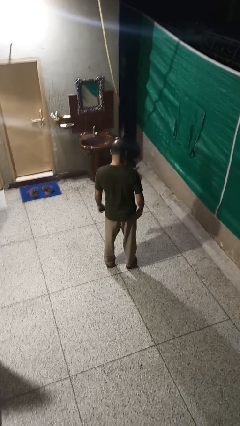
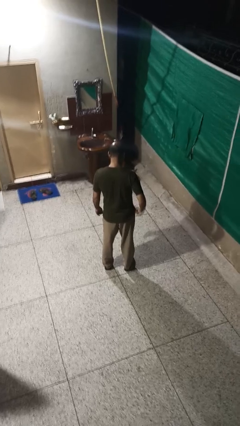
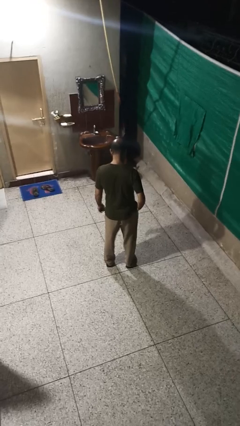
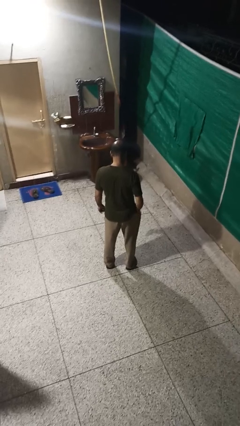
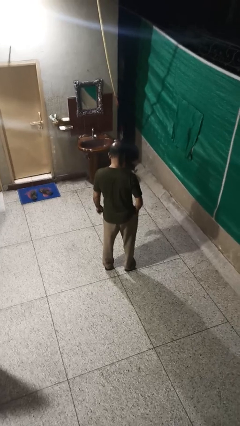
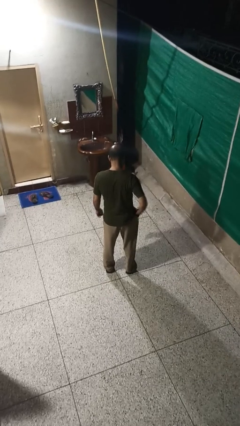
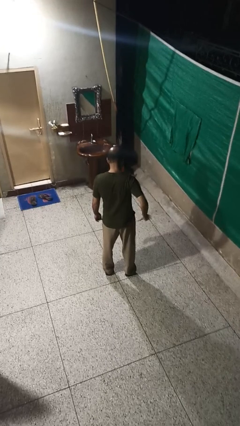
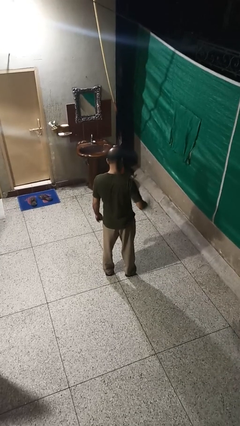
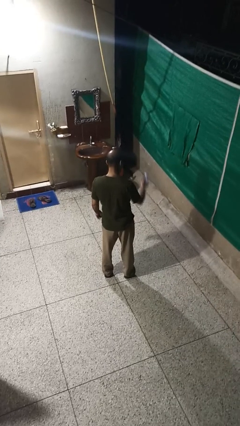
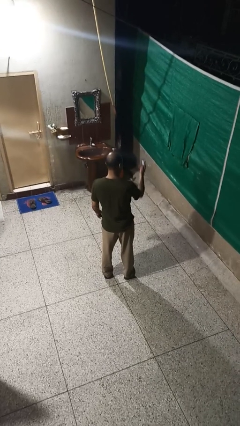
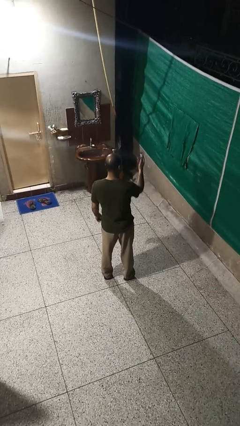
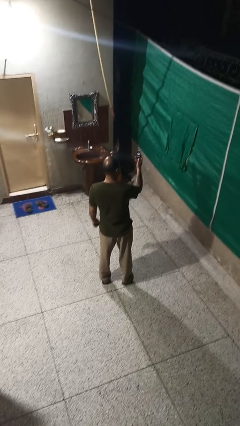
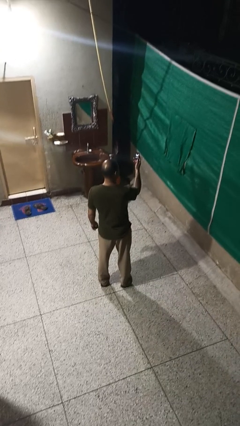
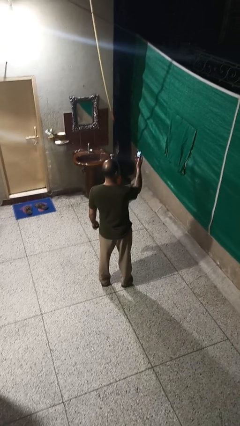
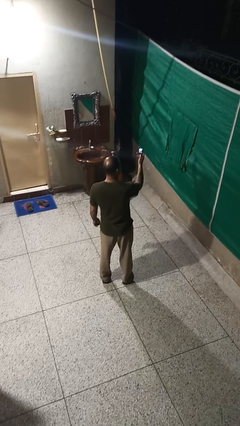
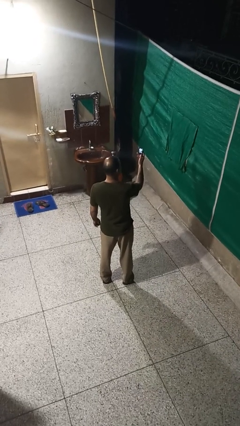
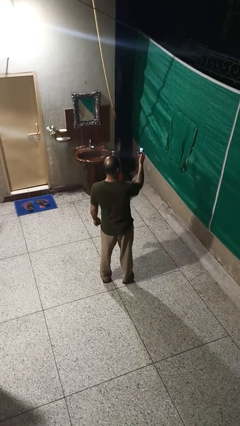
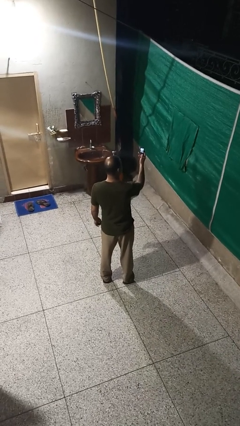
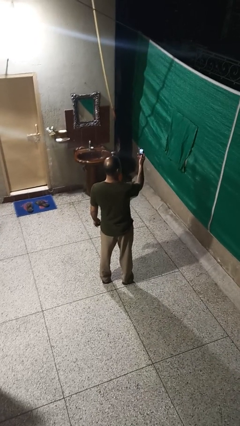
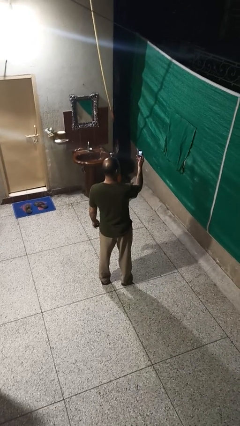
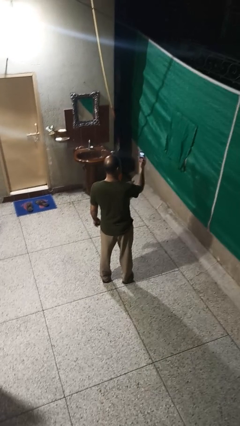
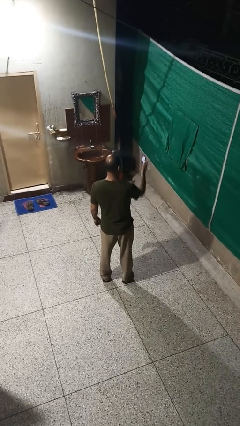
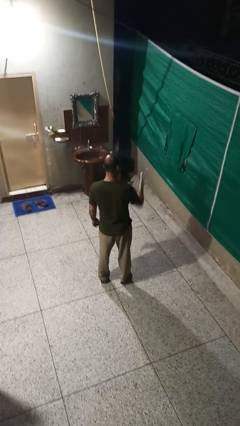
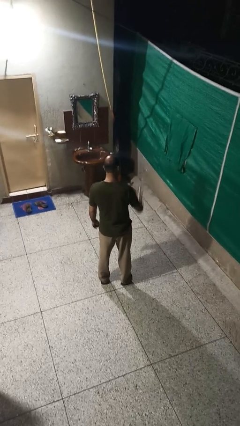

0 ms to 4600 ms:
person takes phone from pocket

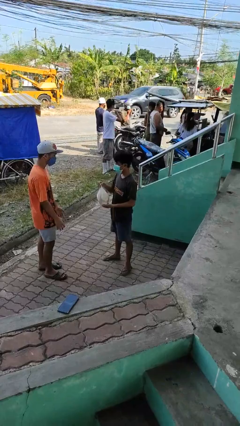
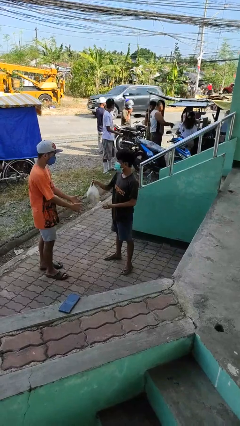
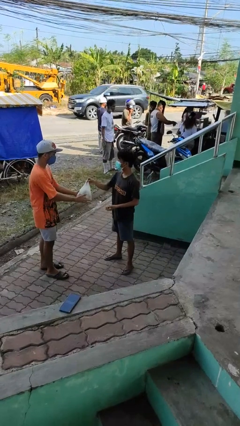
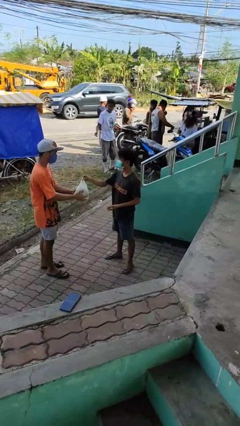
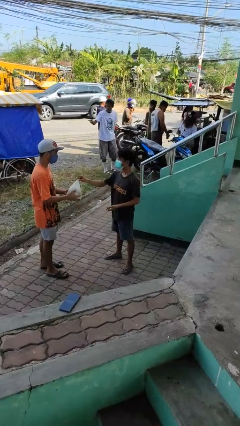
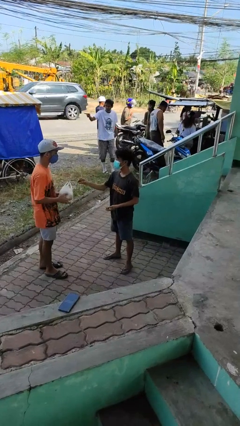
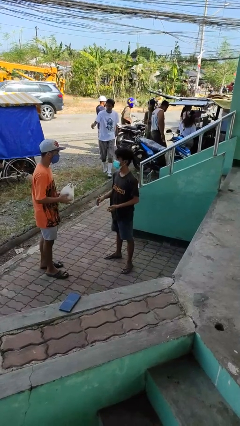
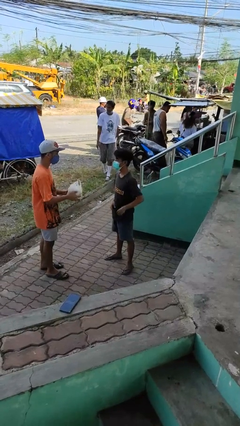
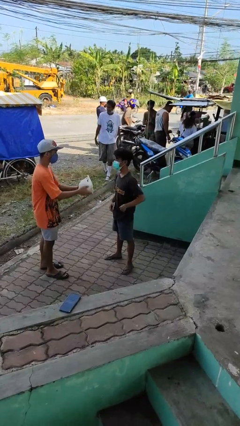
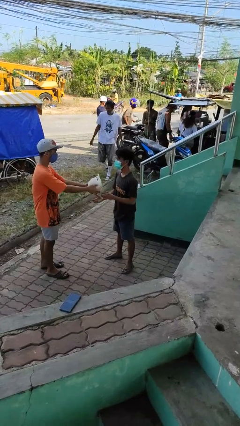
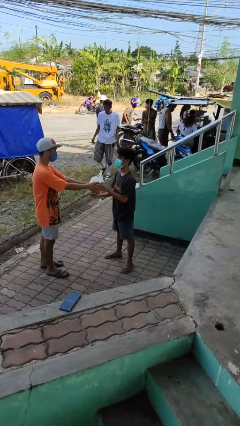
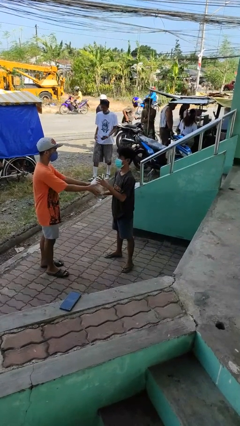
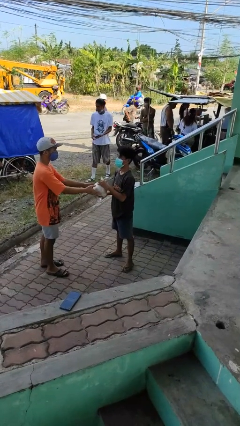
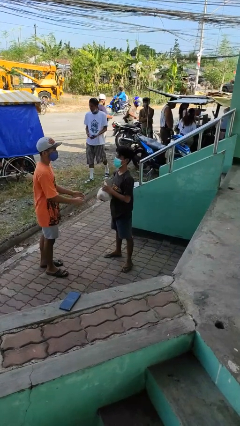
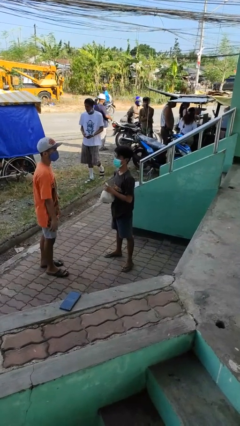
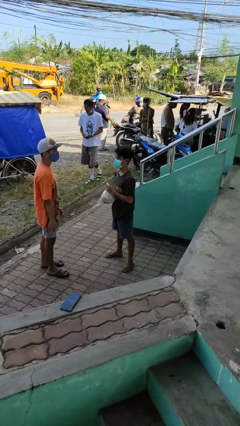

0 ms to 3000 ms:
person transfers object to person

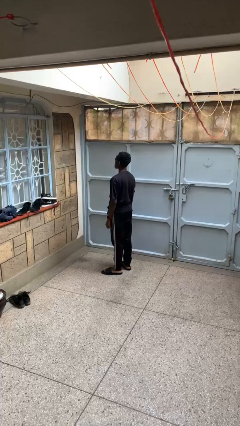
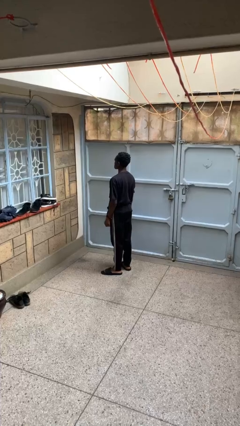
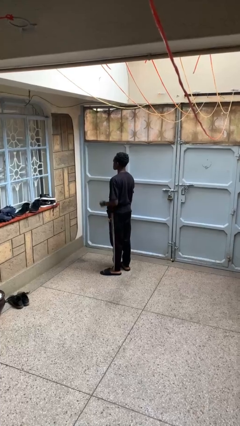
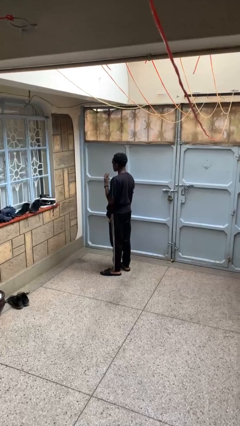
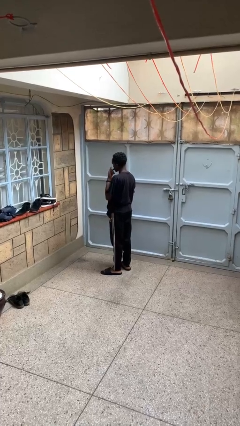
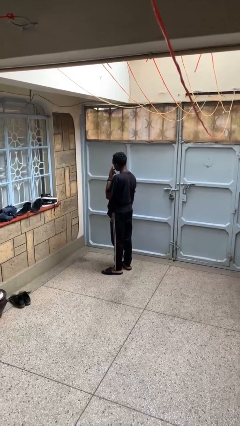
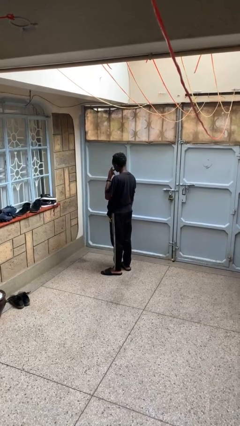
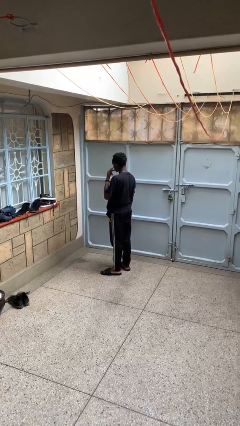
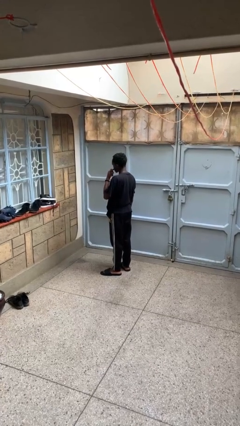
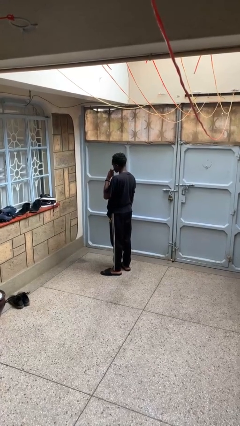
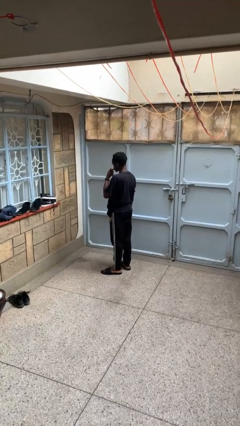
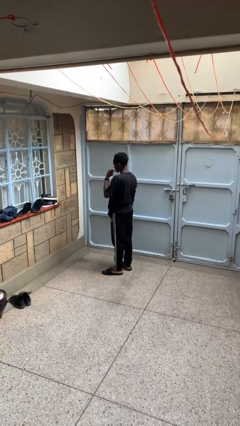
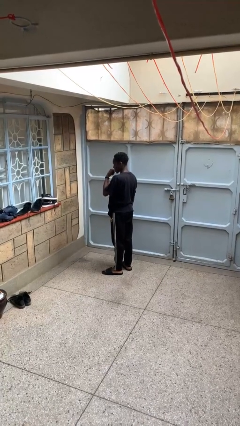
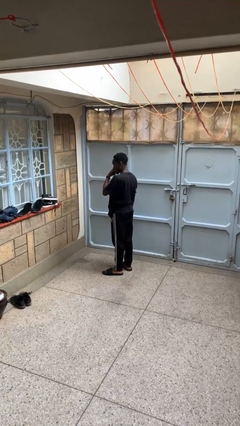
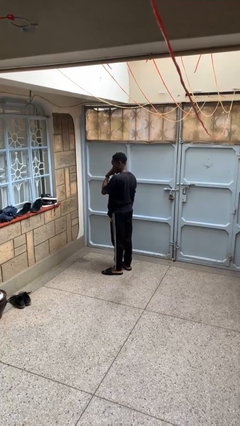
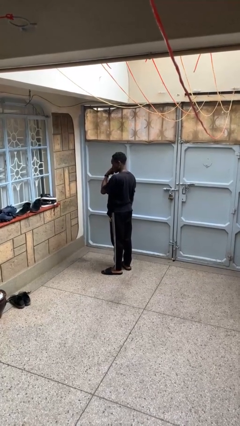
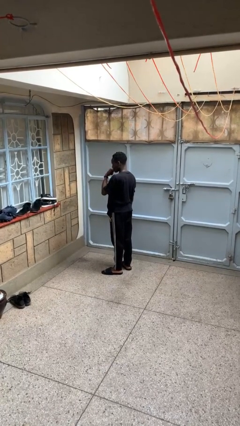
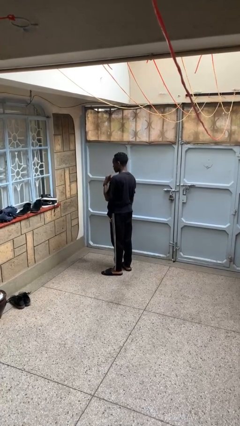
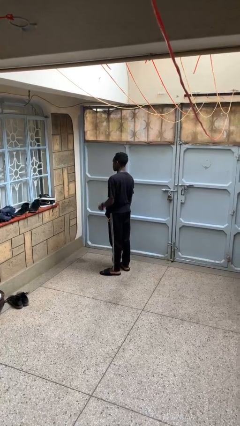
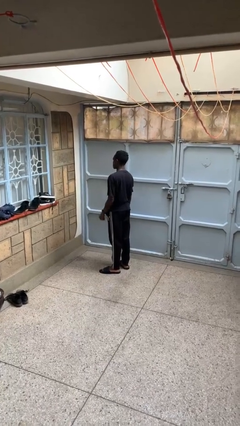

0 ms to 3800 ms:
person licks fingers

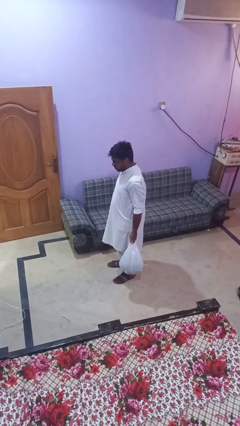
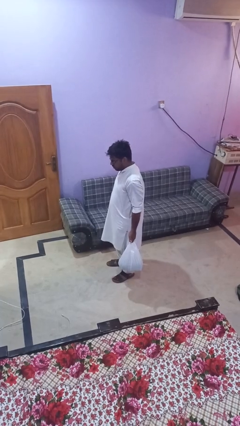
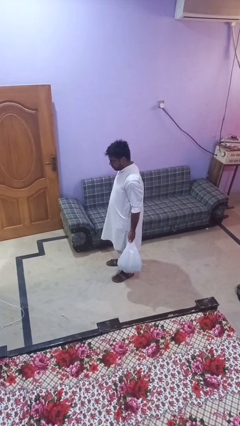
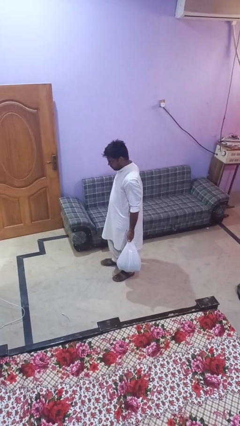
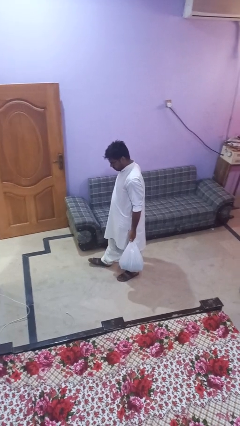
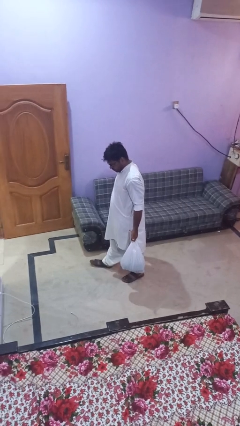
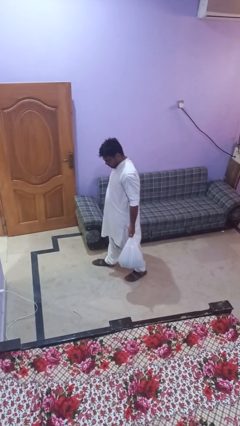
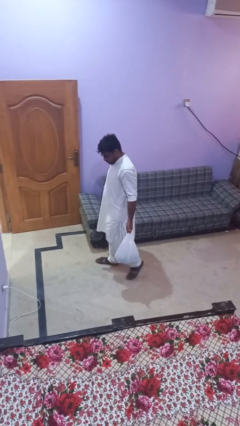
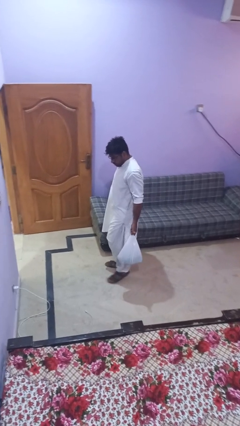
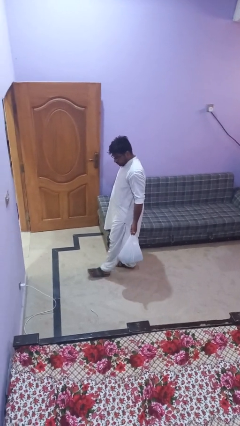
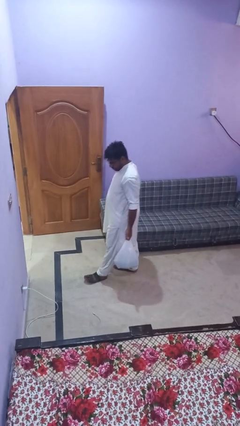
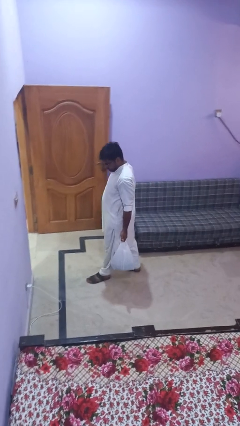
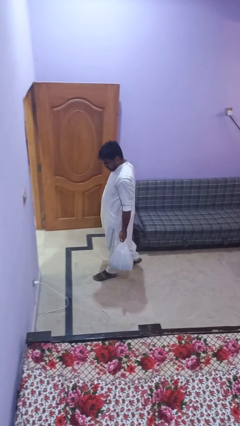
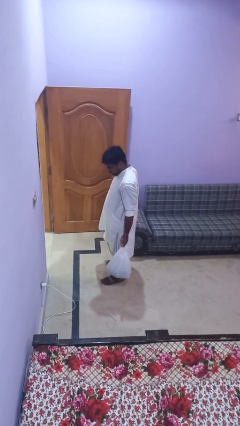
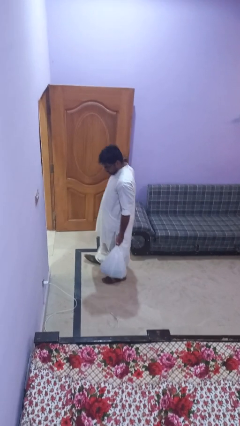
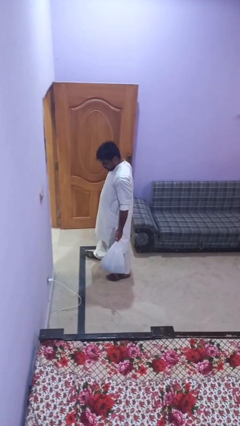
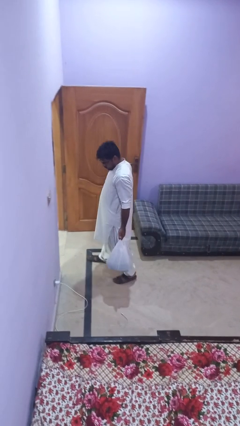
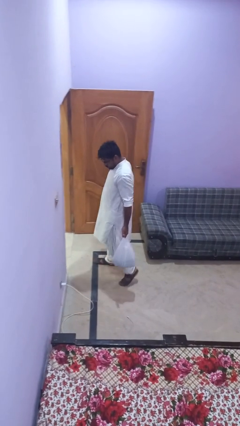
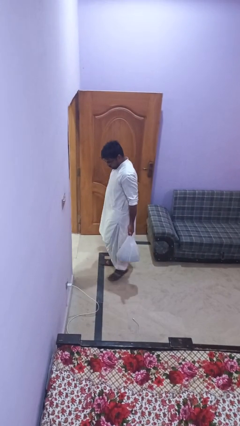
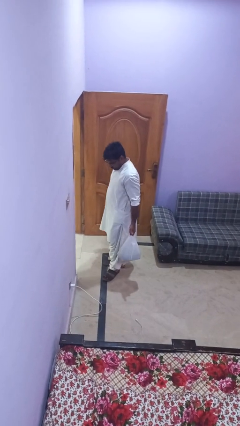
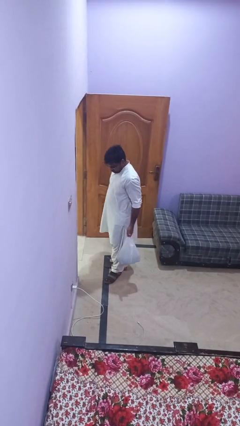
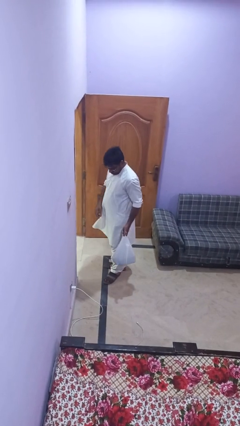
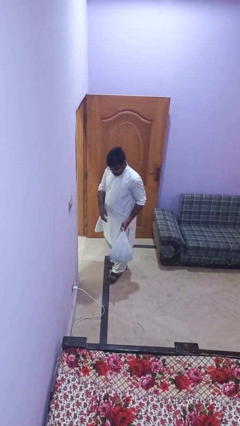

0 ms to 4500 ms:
person carries groceries

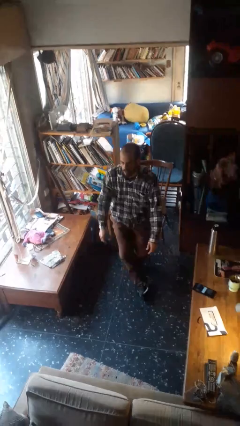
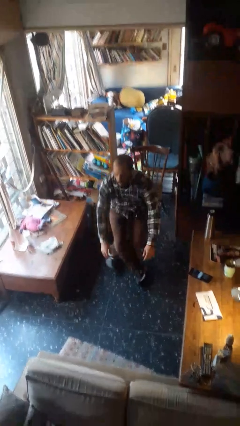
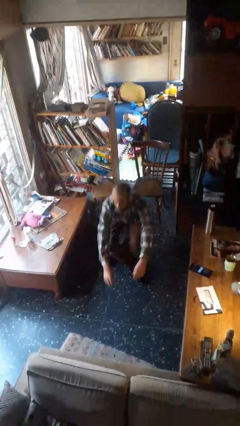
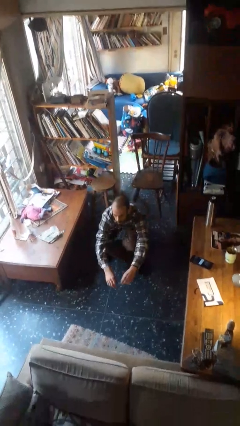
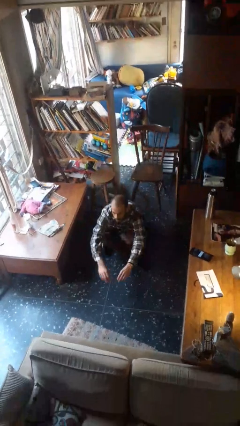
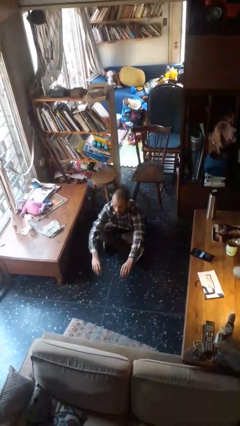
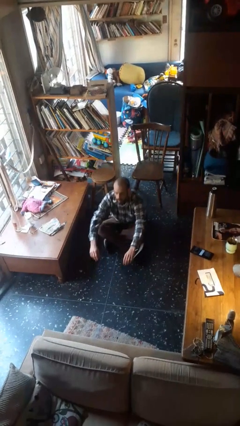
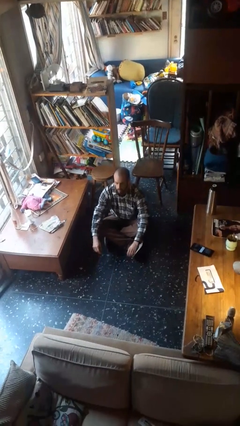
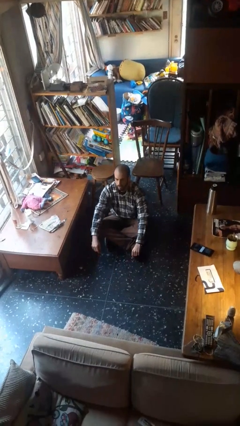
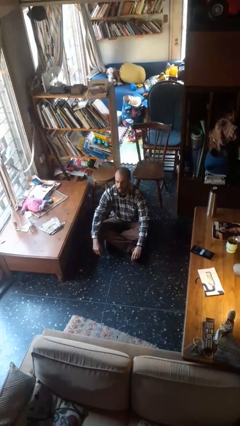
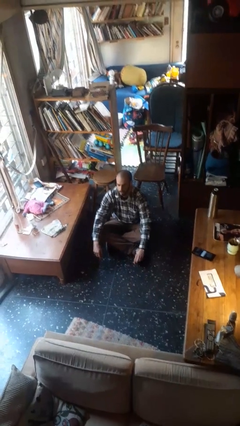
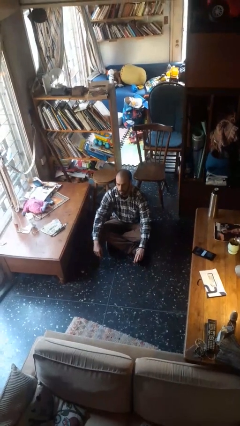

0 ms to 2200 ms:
person sits crisscross
